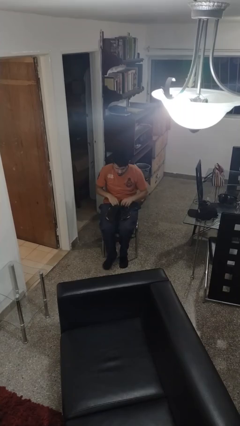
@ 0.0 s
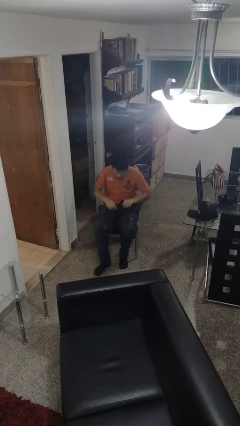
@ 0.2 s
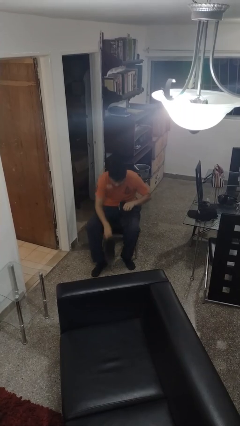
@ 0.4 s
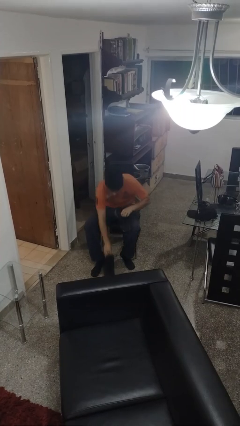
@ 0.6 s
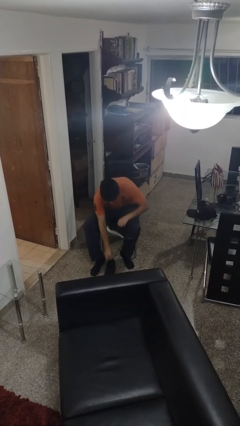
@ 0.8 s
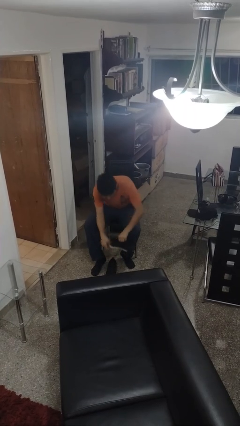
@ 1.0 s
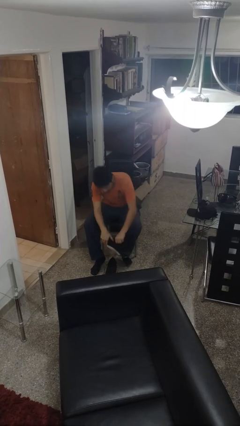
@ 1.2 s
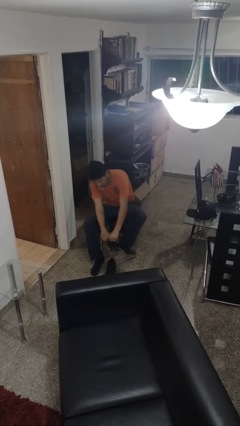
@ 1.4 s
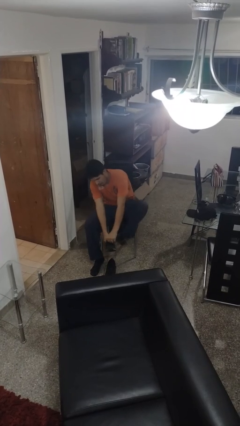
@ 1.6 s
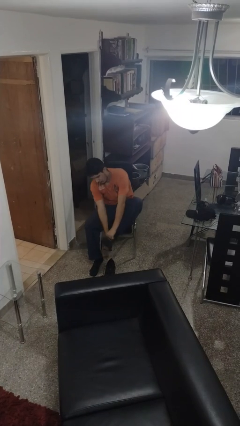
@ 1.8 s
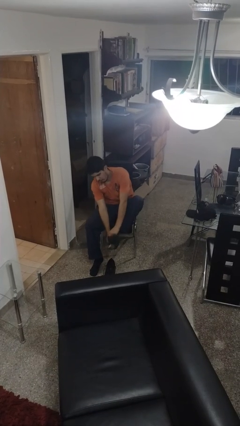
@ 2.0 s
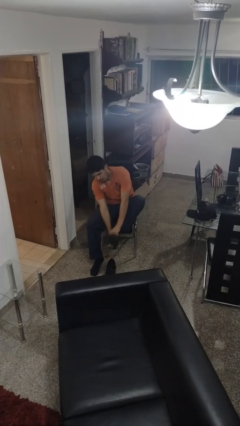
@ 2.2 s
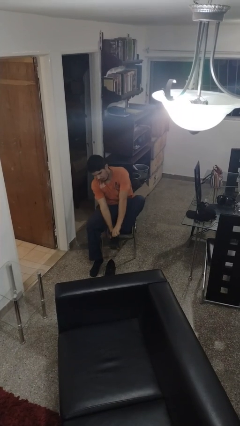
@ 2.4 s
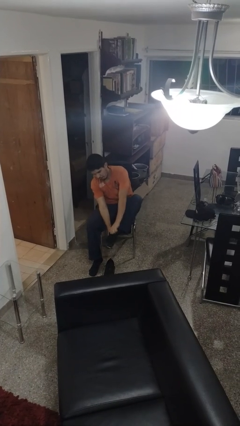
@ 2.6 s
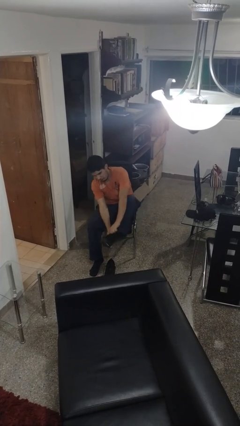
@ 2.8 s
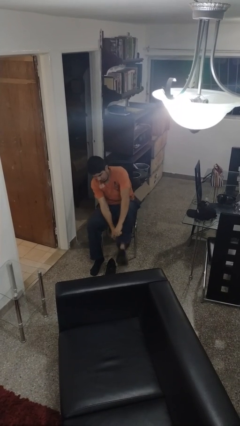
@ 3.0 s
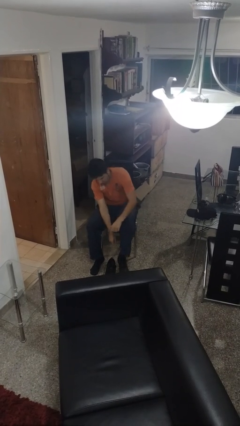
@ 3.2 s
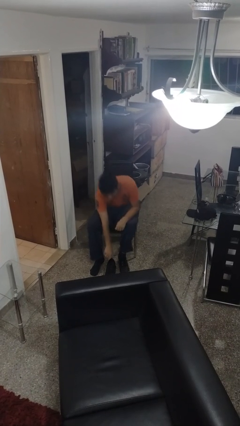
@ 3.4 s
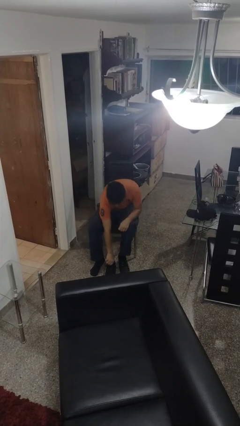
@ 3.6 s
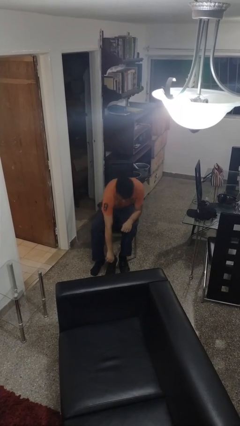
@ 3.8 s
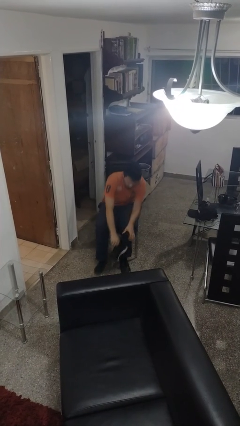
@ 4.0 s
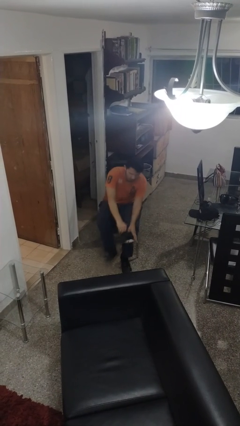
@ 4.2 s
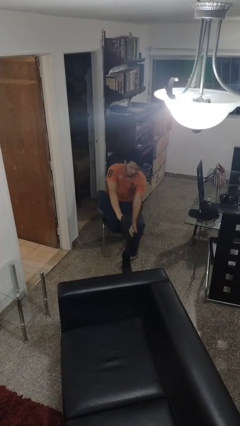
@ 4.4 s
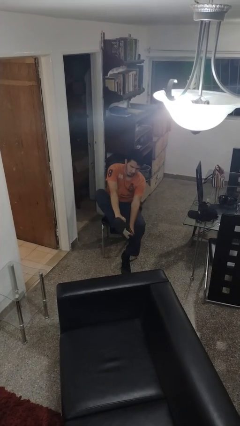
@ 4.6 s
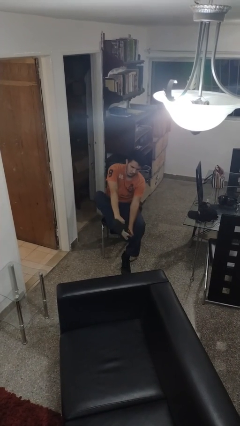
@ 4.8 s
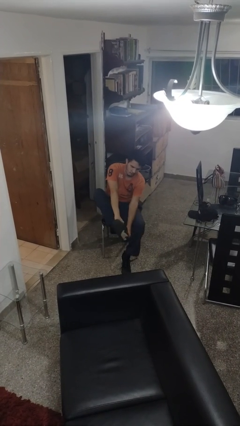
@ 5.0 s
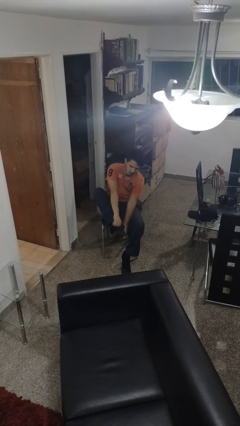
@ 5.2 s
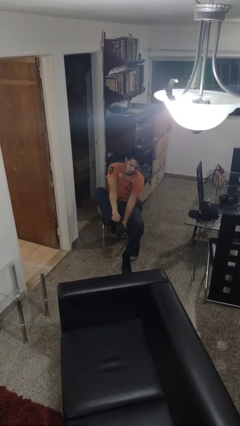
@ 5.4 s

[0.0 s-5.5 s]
person puts on shoes

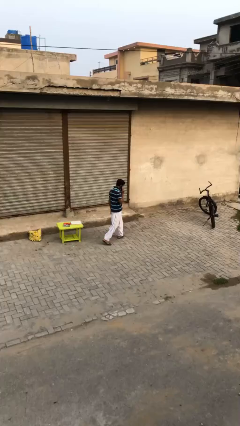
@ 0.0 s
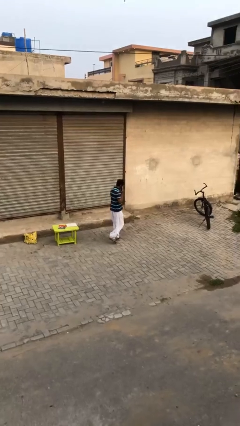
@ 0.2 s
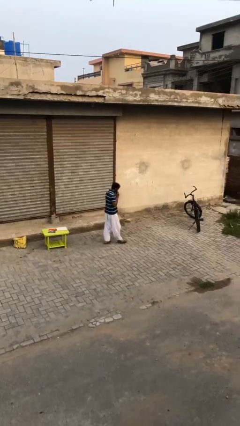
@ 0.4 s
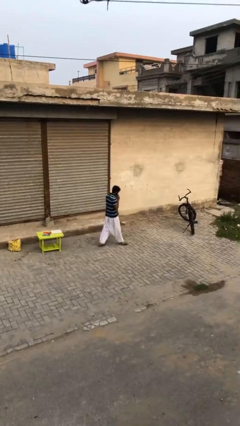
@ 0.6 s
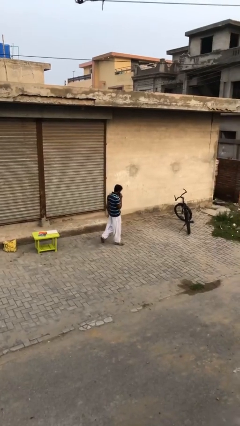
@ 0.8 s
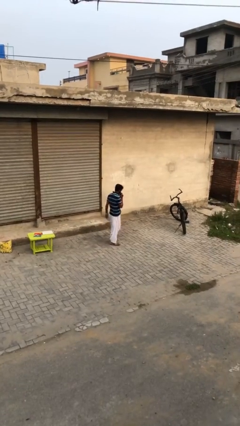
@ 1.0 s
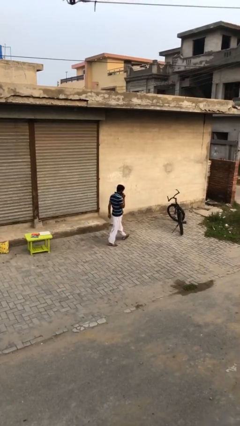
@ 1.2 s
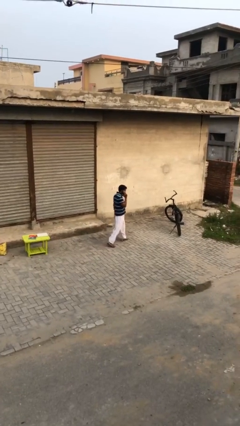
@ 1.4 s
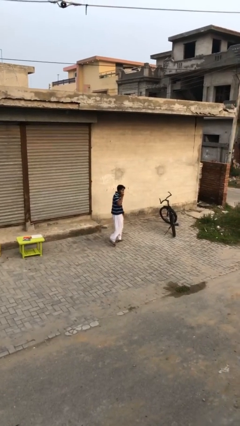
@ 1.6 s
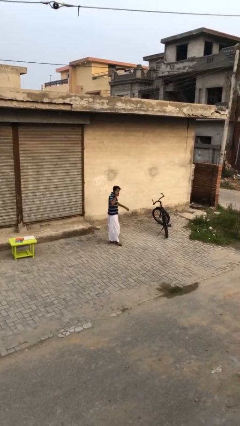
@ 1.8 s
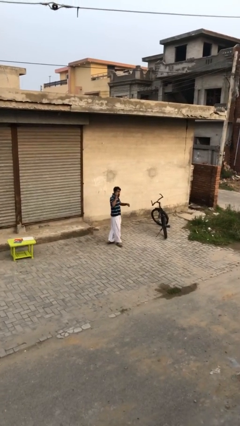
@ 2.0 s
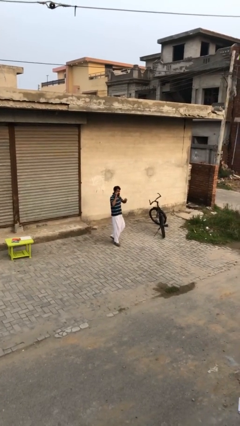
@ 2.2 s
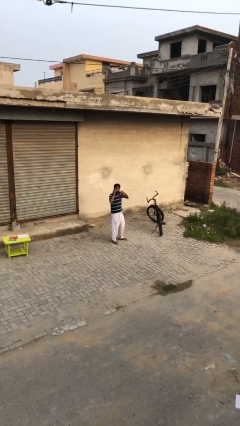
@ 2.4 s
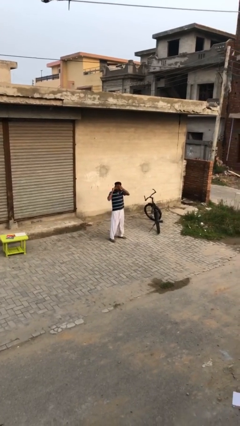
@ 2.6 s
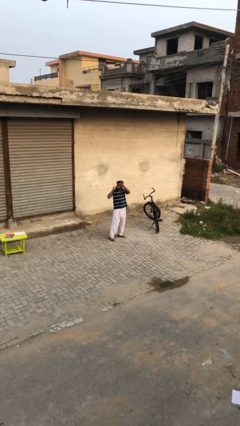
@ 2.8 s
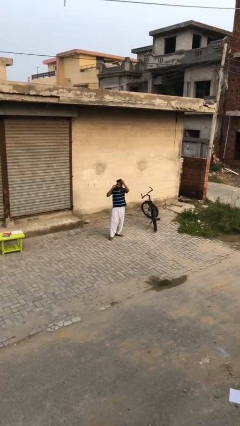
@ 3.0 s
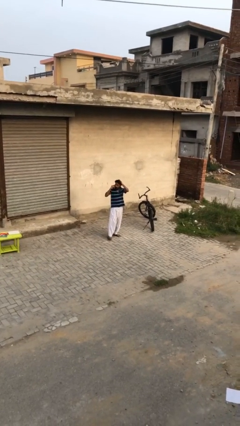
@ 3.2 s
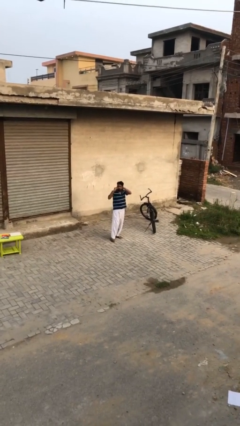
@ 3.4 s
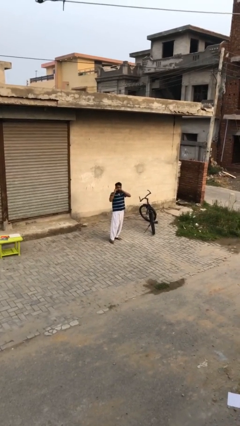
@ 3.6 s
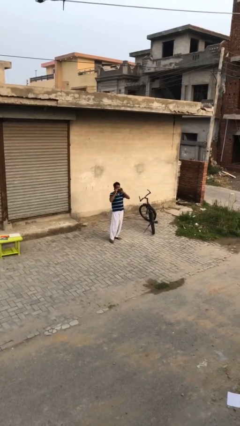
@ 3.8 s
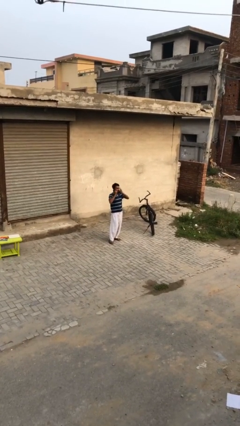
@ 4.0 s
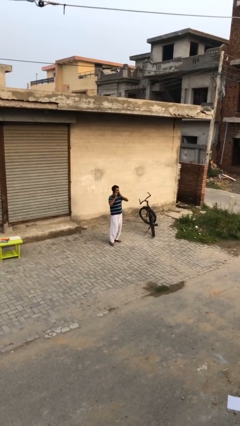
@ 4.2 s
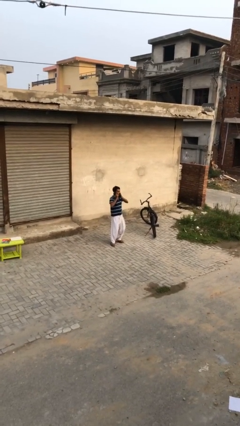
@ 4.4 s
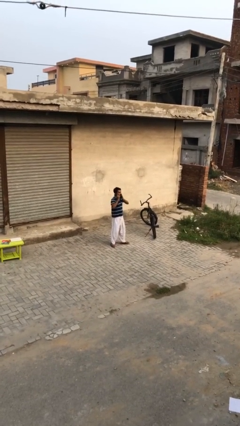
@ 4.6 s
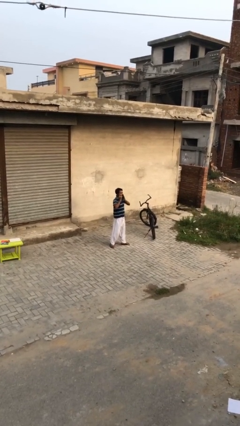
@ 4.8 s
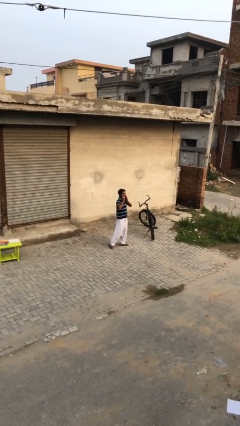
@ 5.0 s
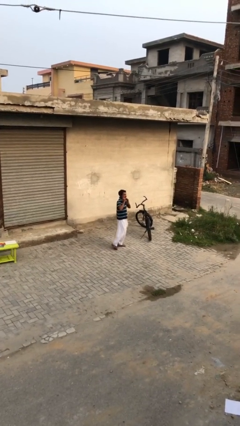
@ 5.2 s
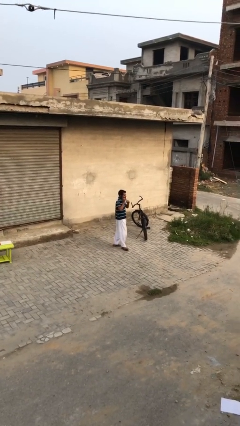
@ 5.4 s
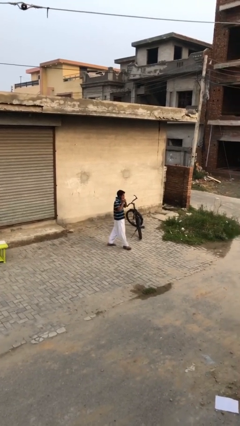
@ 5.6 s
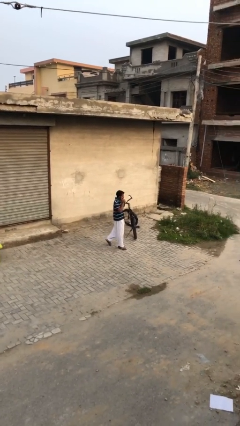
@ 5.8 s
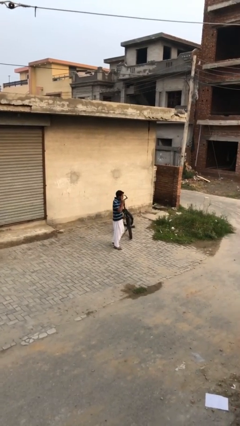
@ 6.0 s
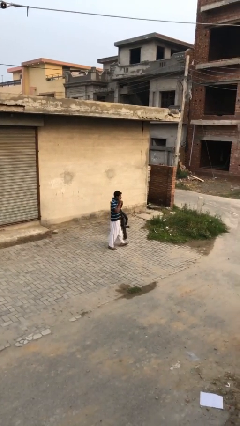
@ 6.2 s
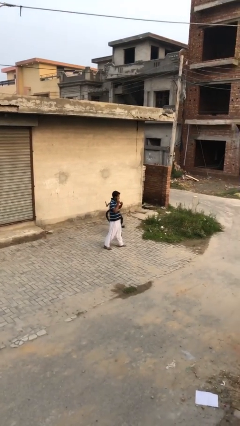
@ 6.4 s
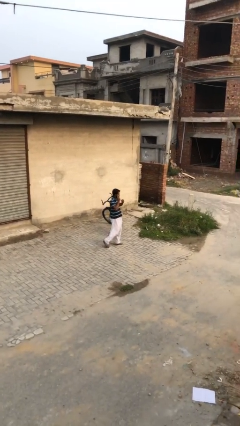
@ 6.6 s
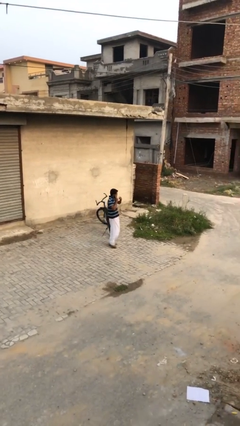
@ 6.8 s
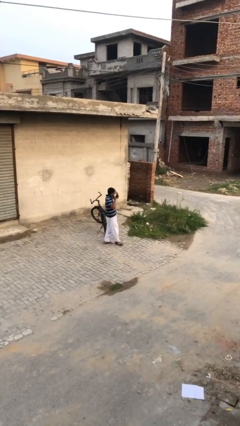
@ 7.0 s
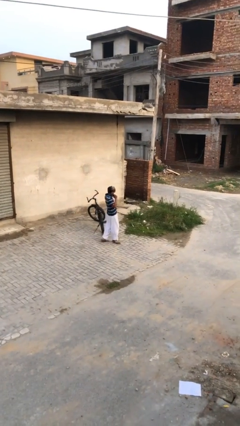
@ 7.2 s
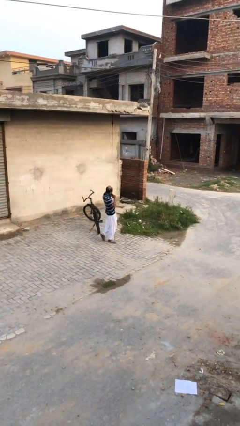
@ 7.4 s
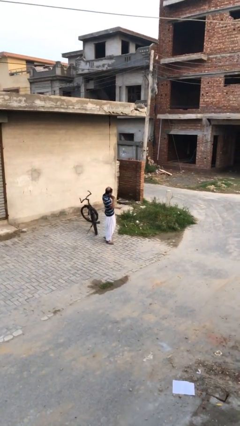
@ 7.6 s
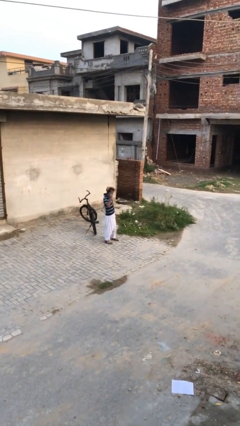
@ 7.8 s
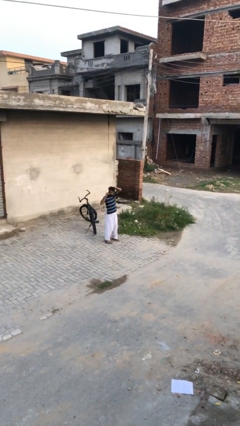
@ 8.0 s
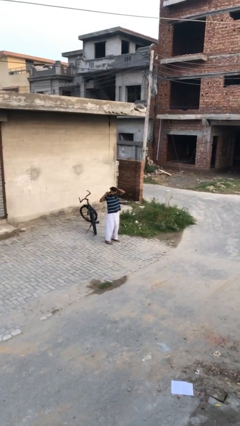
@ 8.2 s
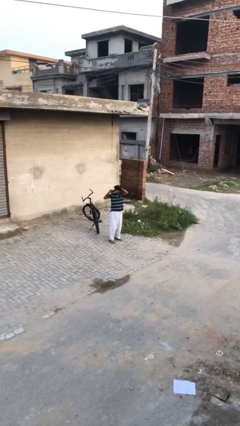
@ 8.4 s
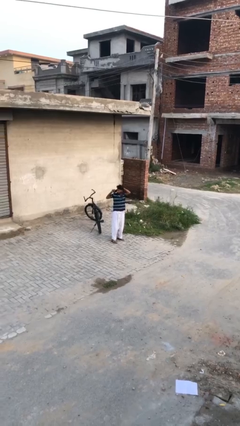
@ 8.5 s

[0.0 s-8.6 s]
person talks on phone

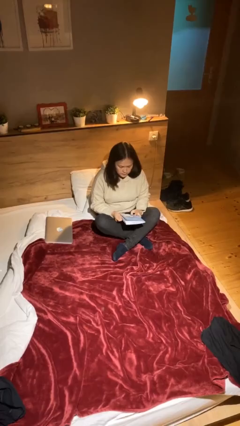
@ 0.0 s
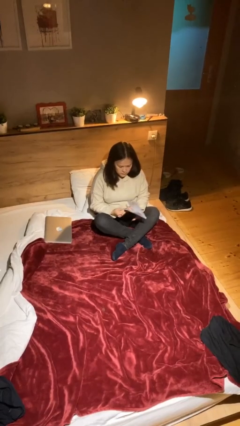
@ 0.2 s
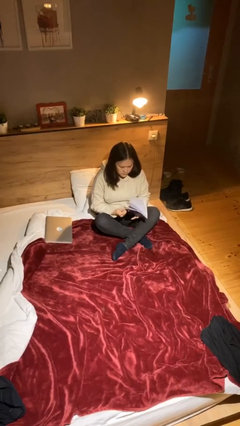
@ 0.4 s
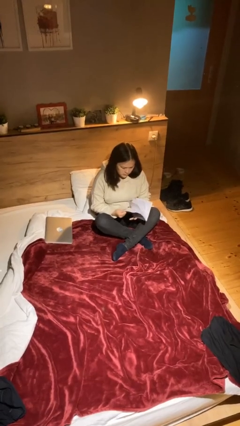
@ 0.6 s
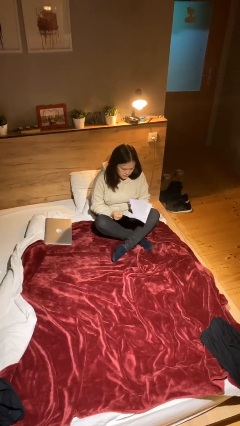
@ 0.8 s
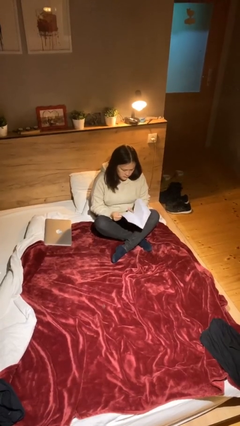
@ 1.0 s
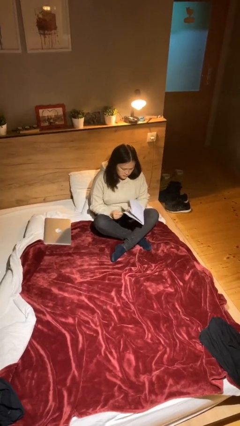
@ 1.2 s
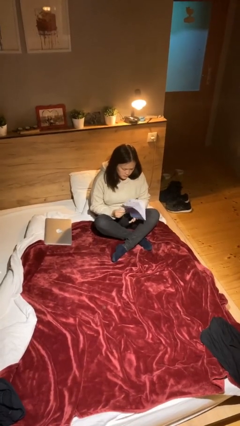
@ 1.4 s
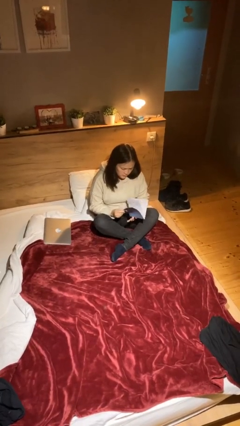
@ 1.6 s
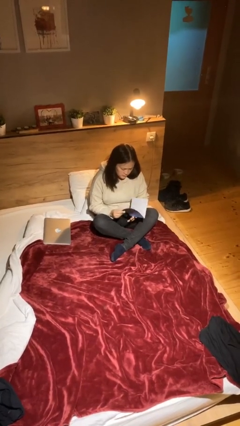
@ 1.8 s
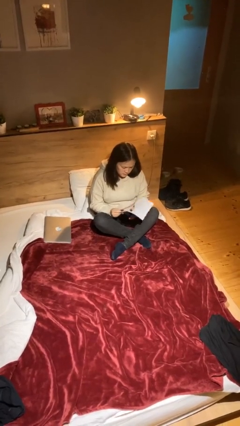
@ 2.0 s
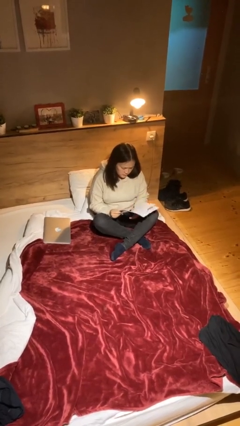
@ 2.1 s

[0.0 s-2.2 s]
person reads document

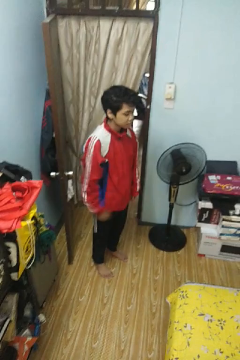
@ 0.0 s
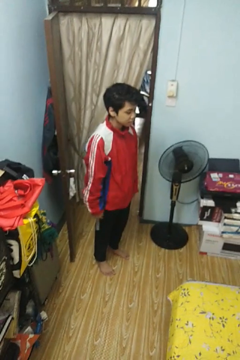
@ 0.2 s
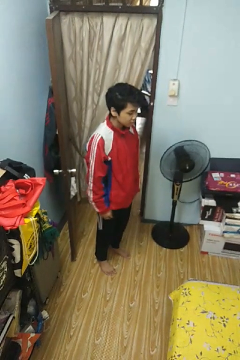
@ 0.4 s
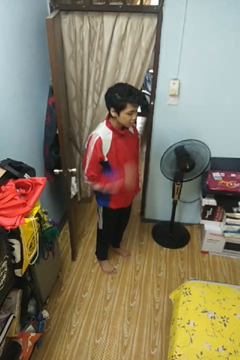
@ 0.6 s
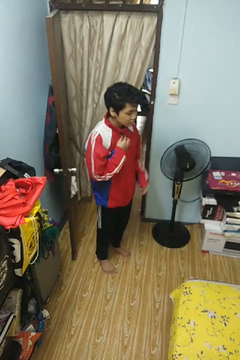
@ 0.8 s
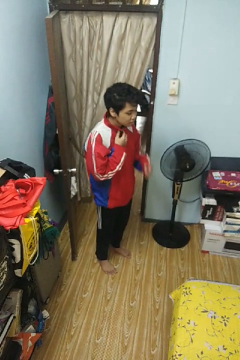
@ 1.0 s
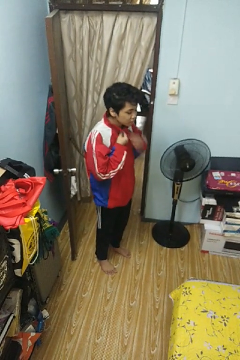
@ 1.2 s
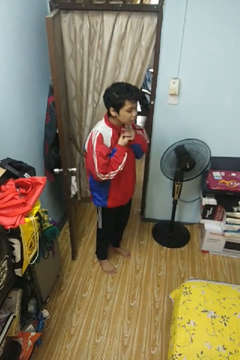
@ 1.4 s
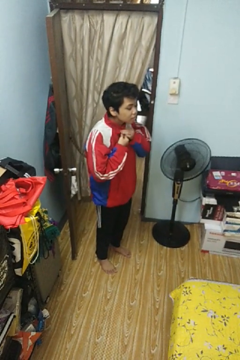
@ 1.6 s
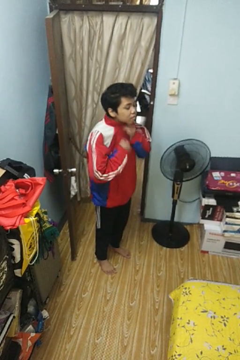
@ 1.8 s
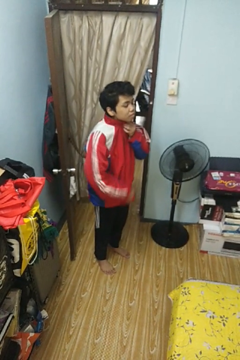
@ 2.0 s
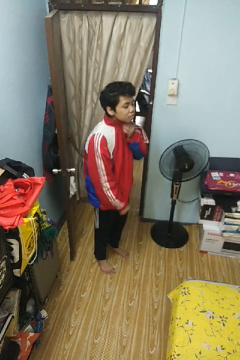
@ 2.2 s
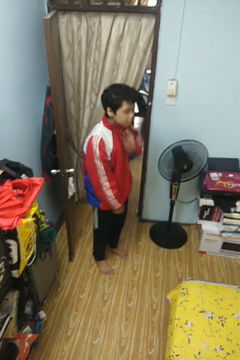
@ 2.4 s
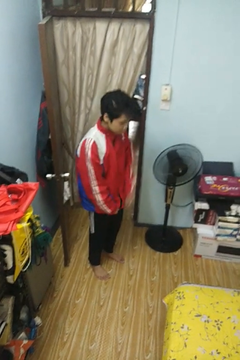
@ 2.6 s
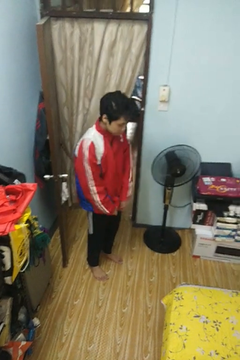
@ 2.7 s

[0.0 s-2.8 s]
person unzips jacket
